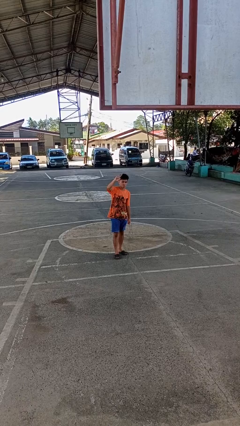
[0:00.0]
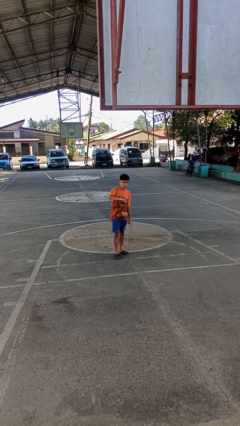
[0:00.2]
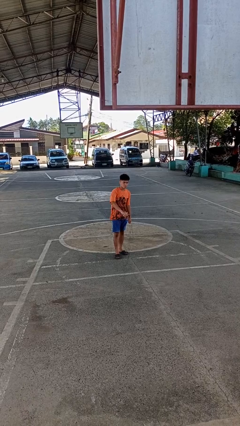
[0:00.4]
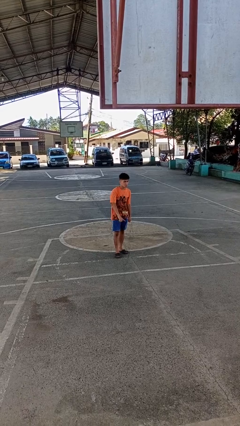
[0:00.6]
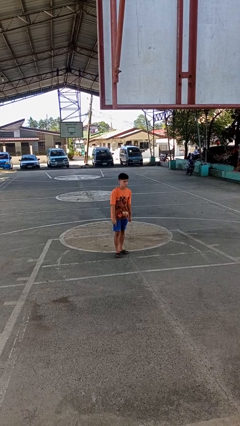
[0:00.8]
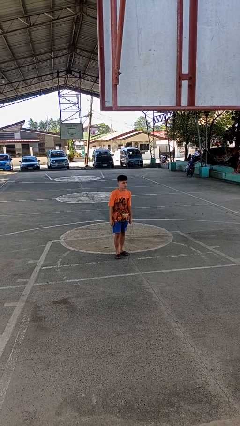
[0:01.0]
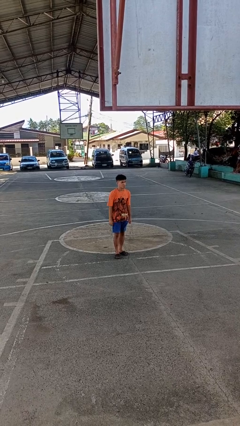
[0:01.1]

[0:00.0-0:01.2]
person gestures swipe down

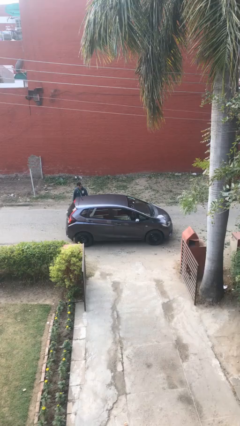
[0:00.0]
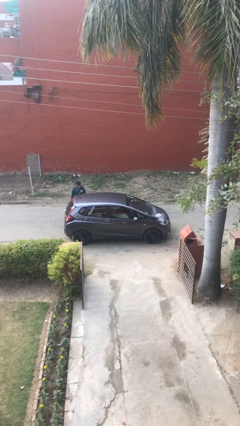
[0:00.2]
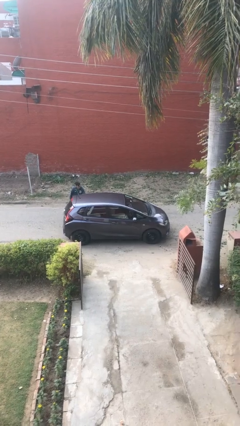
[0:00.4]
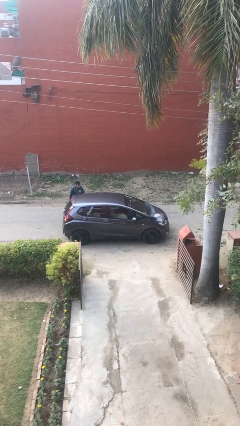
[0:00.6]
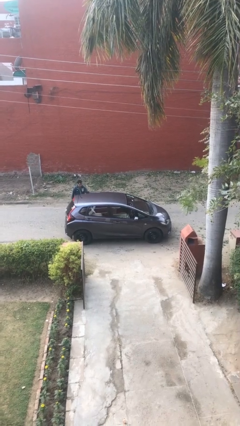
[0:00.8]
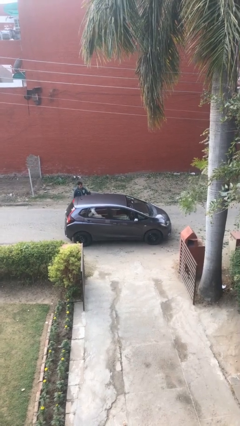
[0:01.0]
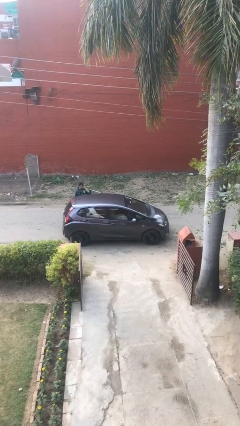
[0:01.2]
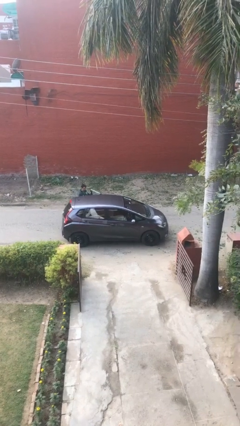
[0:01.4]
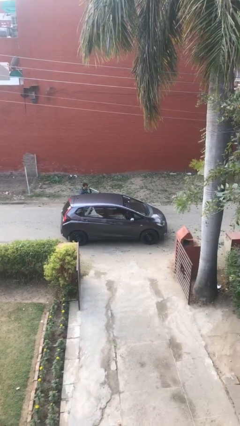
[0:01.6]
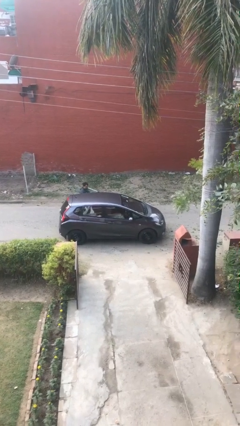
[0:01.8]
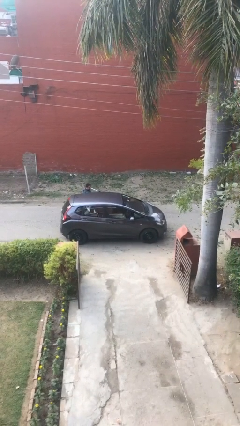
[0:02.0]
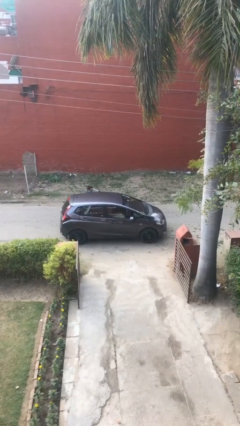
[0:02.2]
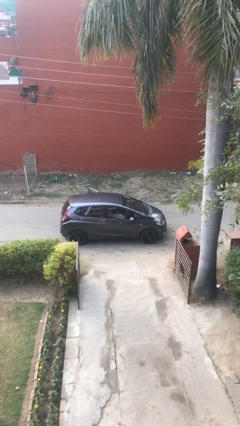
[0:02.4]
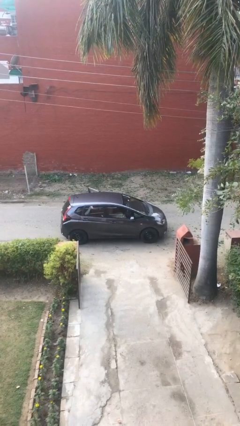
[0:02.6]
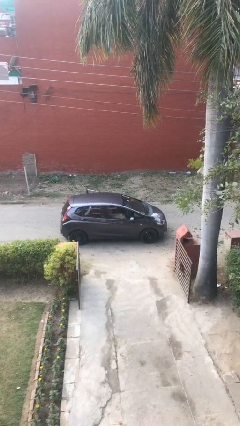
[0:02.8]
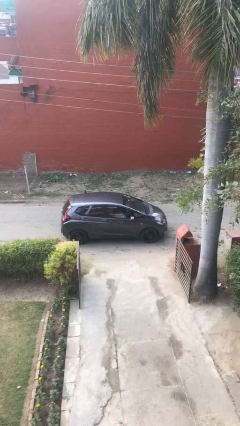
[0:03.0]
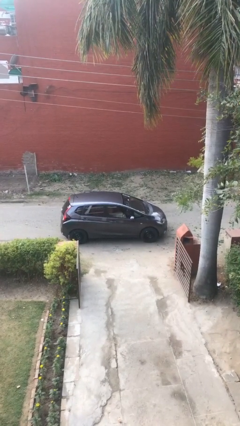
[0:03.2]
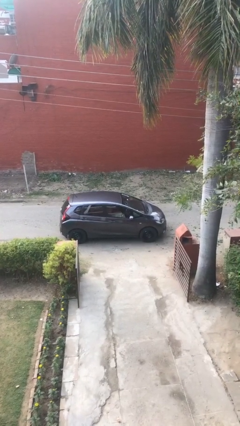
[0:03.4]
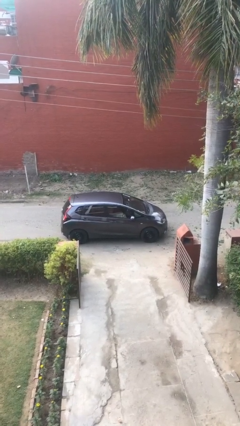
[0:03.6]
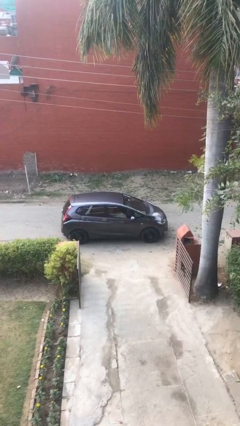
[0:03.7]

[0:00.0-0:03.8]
car picks up person

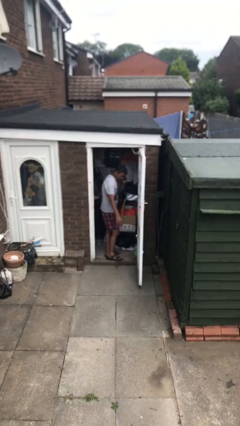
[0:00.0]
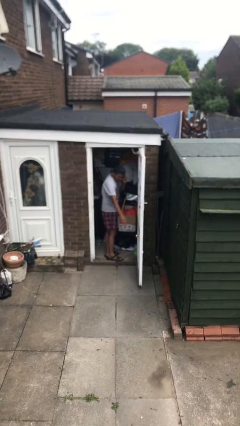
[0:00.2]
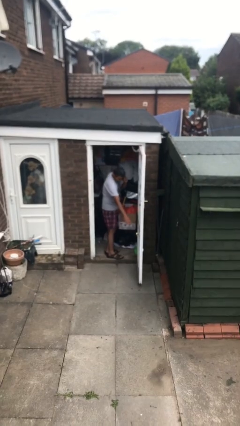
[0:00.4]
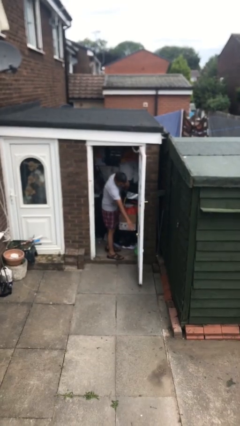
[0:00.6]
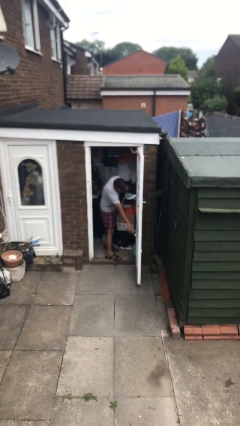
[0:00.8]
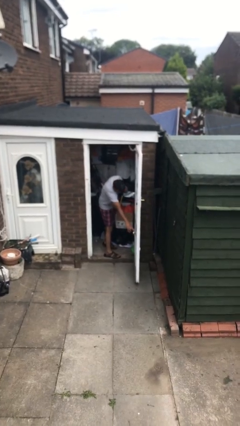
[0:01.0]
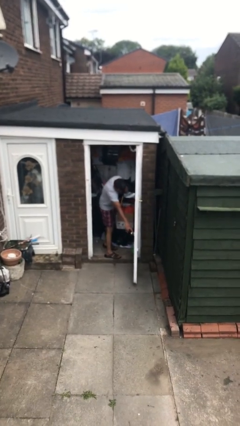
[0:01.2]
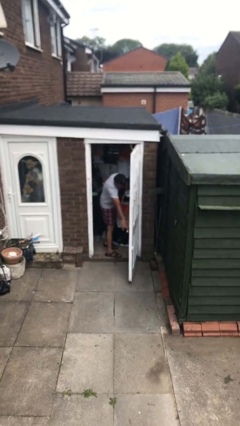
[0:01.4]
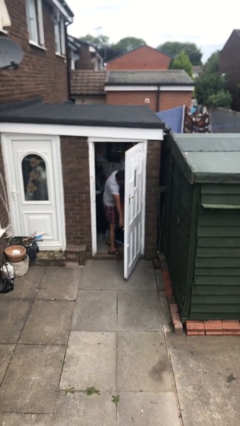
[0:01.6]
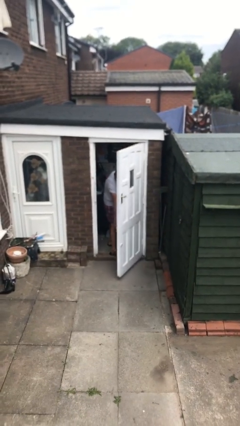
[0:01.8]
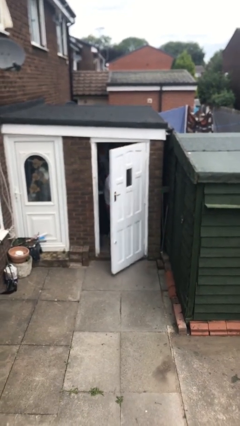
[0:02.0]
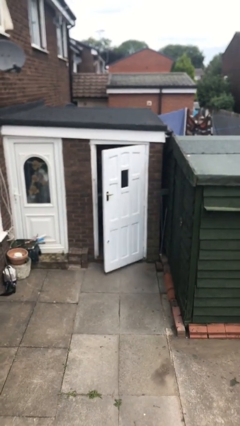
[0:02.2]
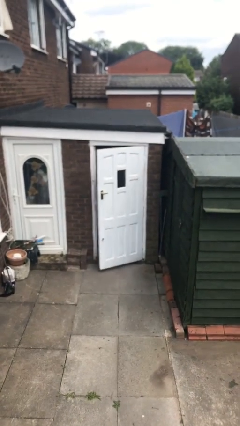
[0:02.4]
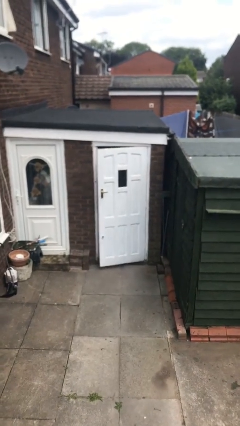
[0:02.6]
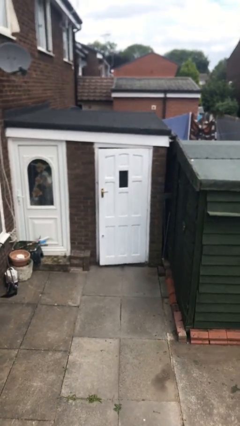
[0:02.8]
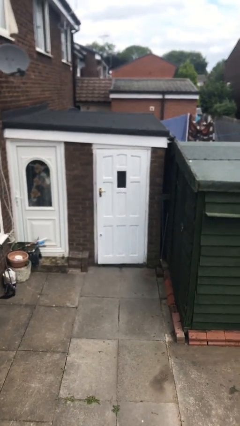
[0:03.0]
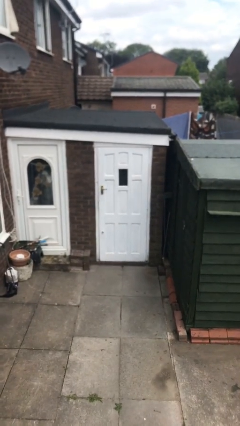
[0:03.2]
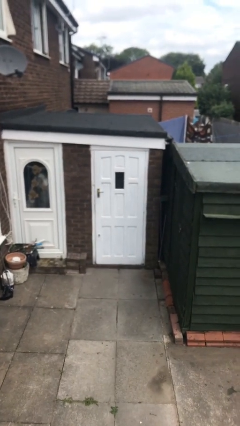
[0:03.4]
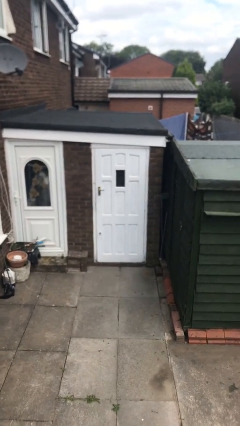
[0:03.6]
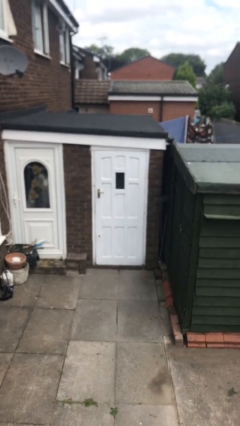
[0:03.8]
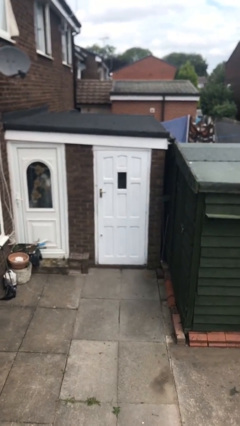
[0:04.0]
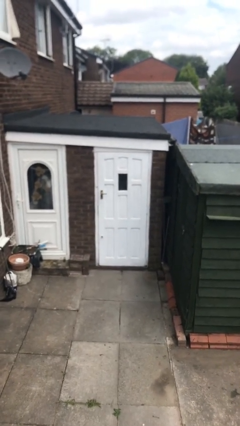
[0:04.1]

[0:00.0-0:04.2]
person closes facility door

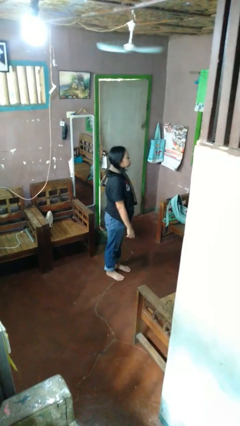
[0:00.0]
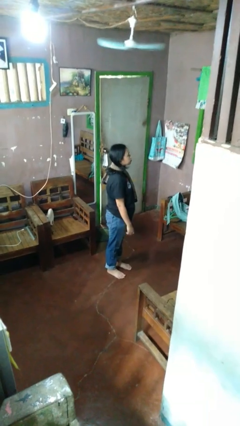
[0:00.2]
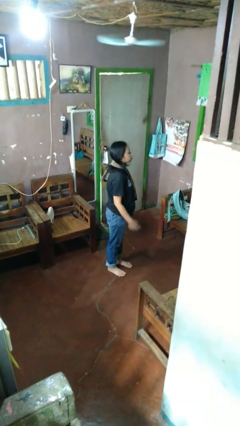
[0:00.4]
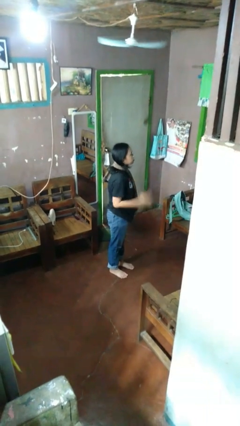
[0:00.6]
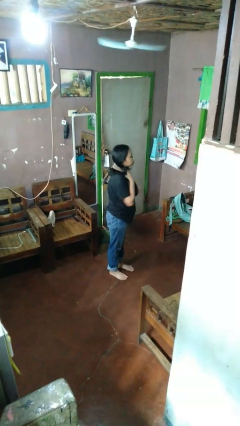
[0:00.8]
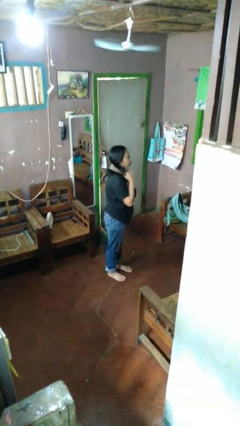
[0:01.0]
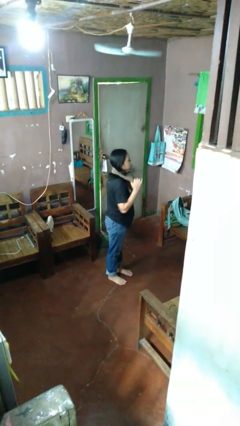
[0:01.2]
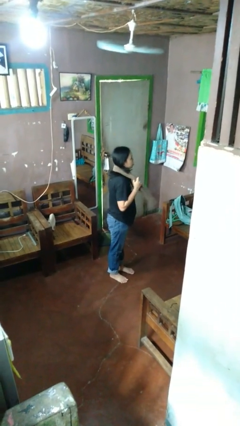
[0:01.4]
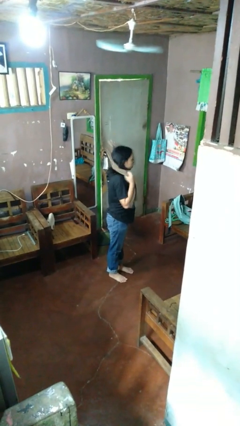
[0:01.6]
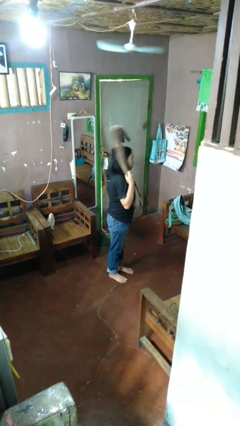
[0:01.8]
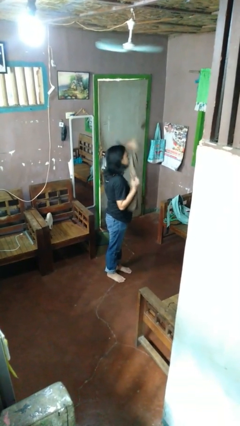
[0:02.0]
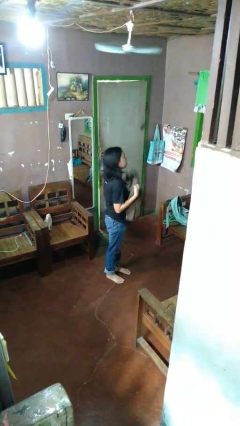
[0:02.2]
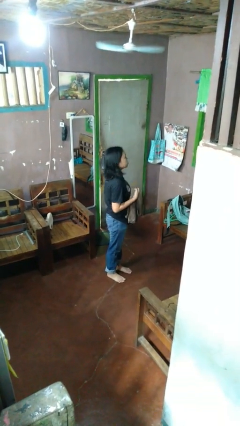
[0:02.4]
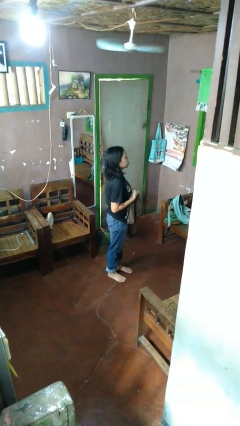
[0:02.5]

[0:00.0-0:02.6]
person takes off scarf

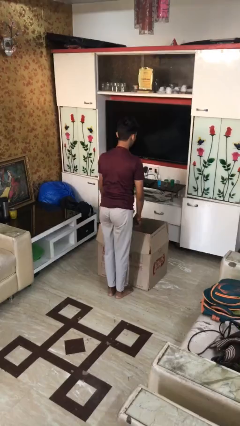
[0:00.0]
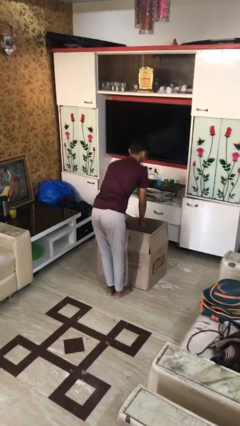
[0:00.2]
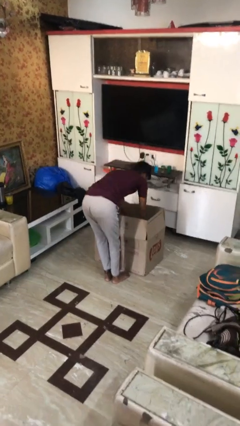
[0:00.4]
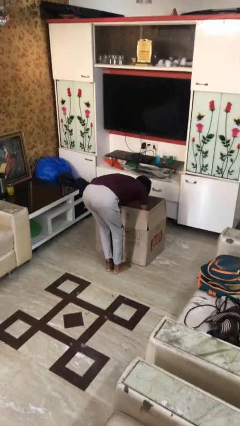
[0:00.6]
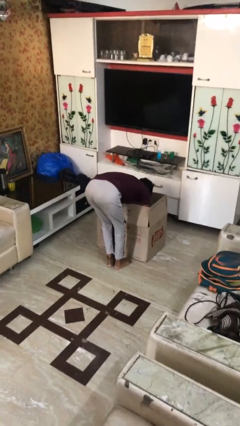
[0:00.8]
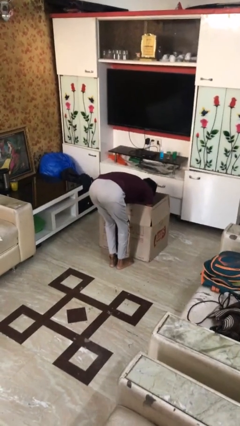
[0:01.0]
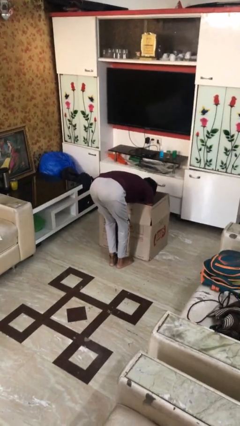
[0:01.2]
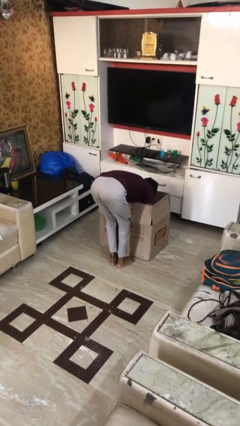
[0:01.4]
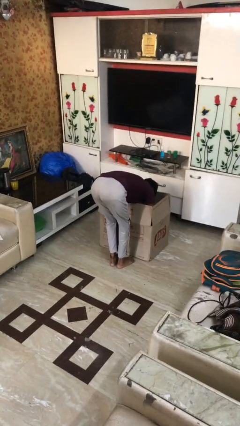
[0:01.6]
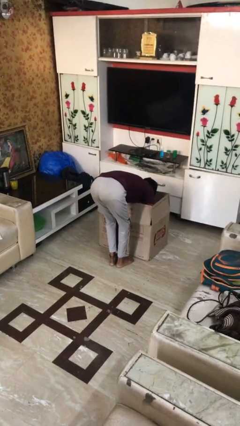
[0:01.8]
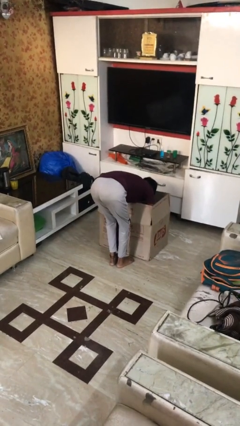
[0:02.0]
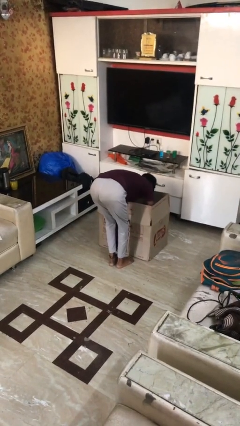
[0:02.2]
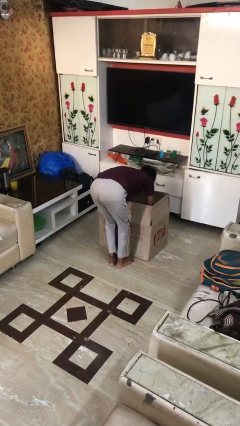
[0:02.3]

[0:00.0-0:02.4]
person searches in box

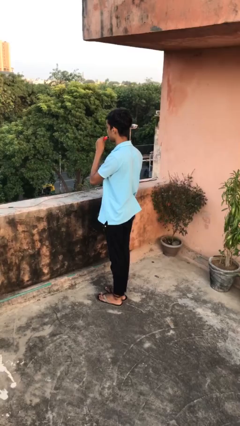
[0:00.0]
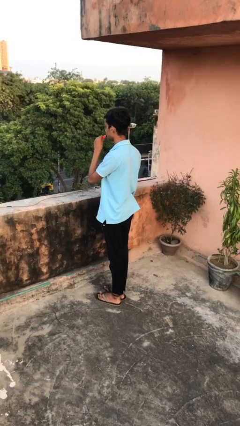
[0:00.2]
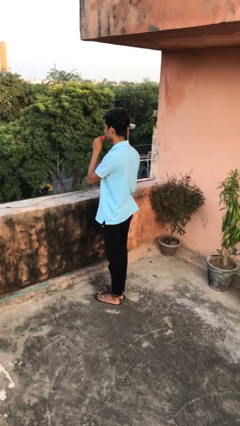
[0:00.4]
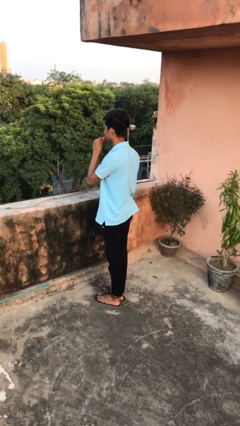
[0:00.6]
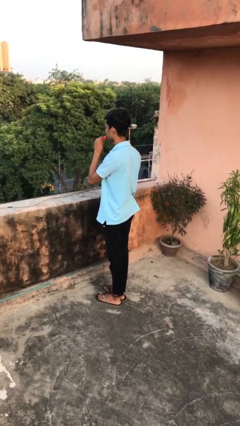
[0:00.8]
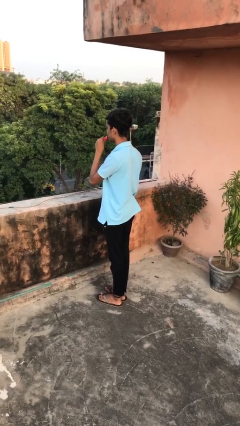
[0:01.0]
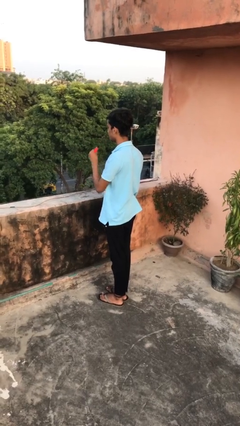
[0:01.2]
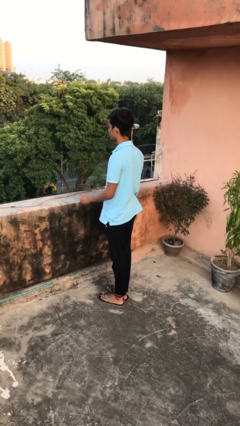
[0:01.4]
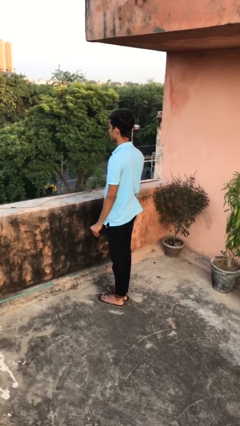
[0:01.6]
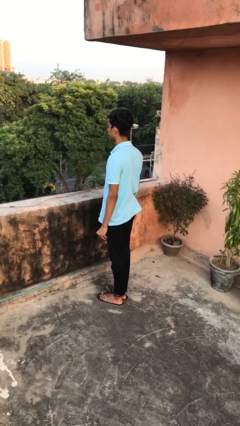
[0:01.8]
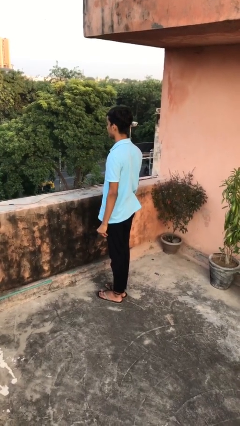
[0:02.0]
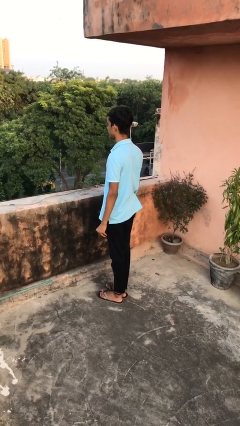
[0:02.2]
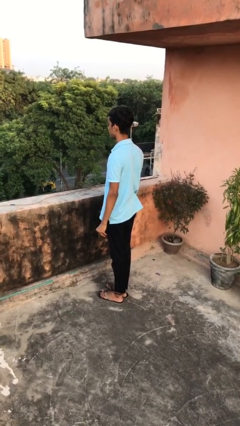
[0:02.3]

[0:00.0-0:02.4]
person vapes

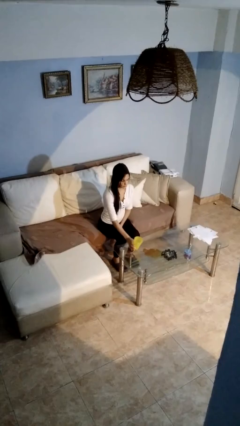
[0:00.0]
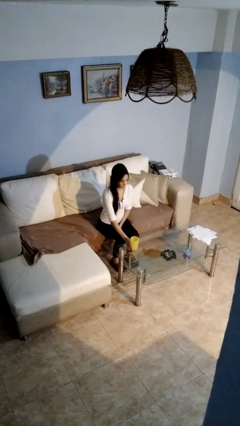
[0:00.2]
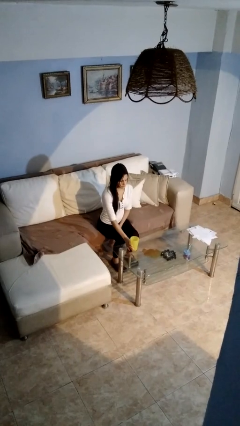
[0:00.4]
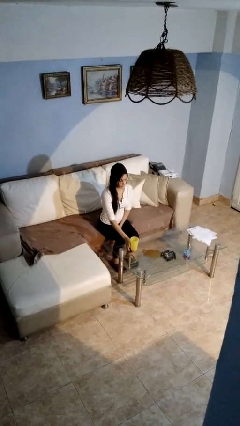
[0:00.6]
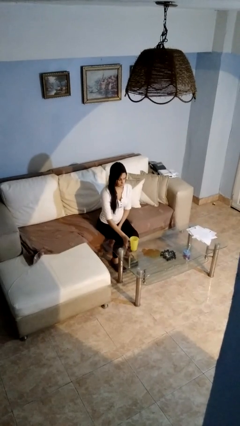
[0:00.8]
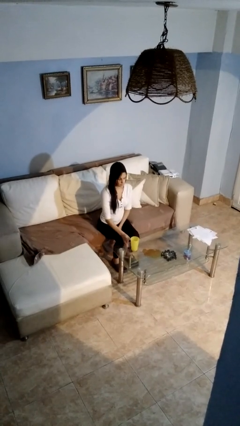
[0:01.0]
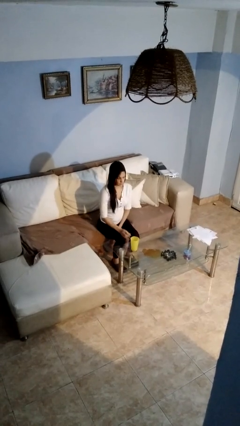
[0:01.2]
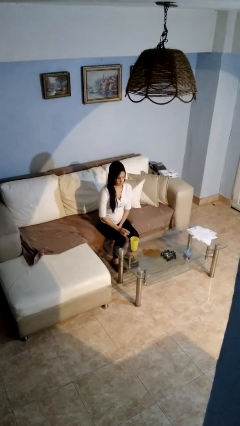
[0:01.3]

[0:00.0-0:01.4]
person sets upright glass
